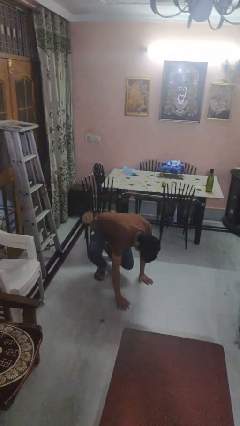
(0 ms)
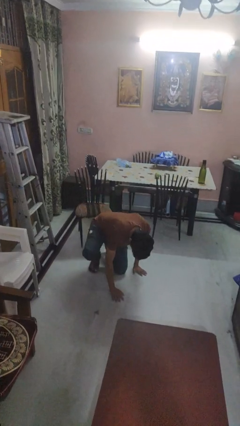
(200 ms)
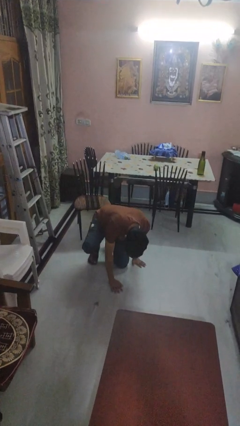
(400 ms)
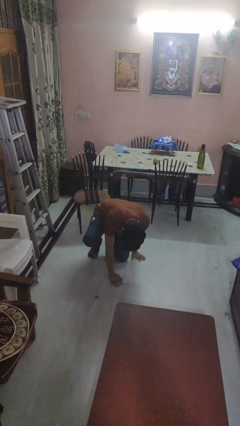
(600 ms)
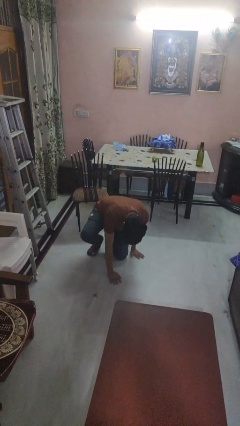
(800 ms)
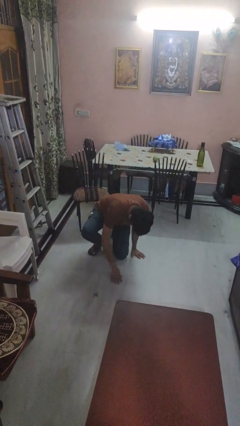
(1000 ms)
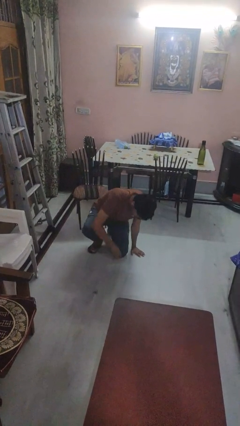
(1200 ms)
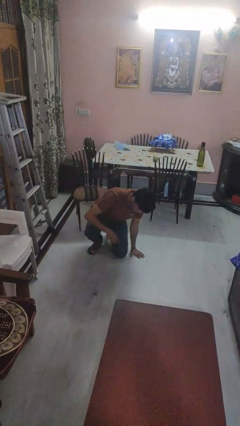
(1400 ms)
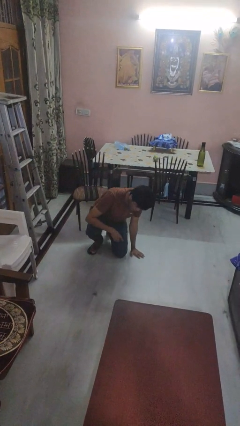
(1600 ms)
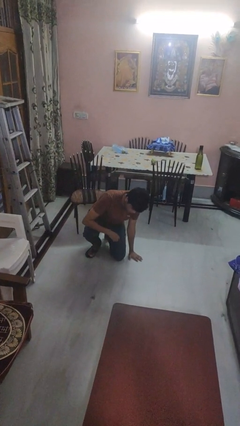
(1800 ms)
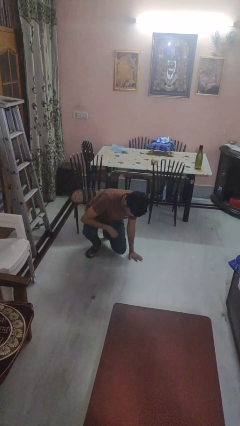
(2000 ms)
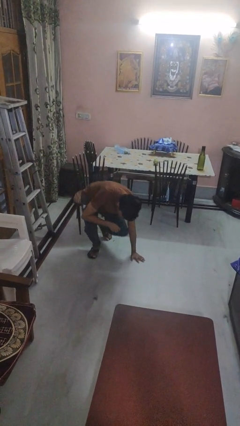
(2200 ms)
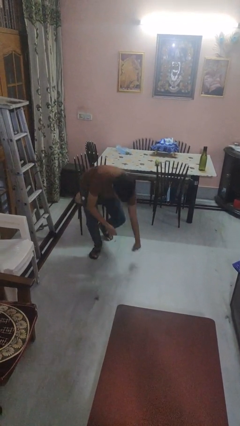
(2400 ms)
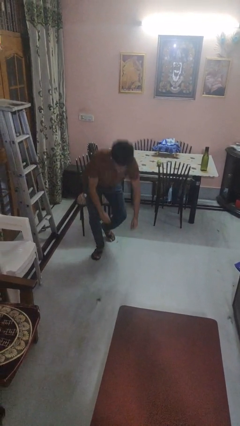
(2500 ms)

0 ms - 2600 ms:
person falls while standing

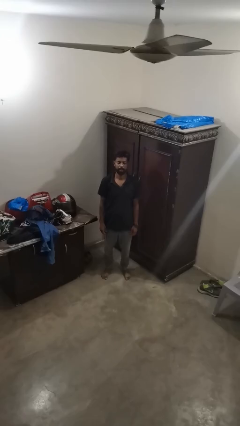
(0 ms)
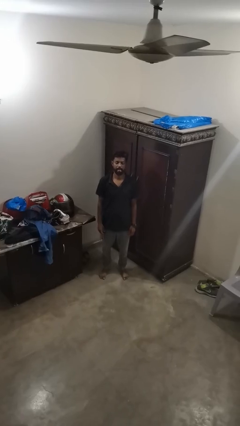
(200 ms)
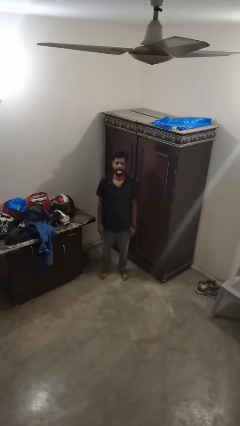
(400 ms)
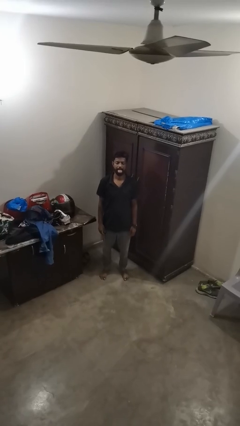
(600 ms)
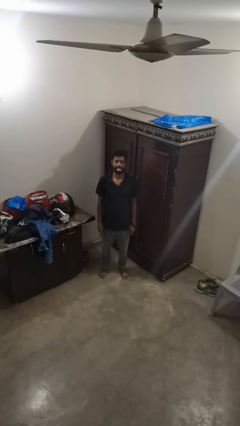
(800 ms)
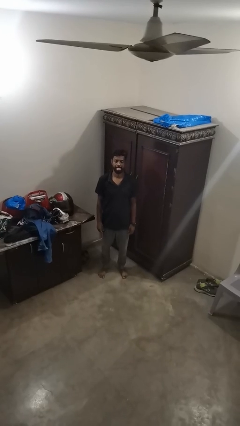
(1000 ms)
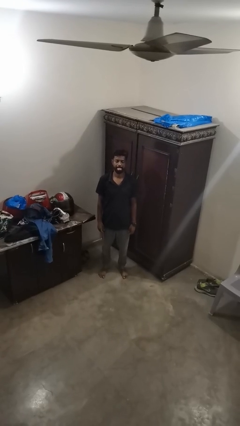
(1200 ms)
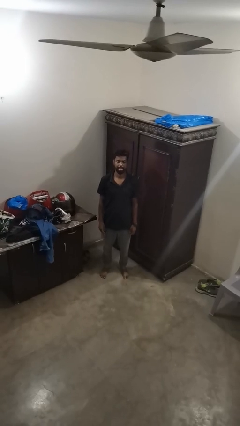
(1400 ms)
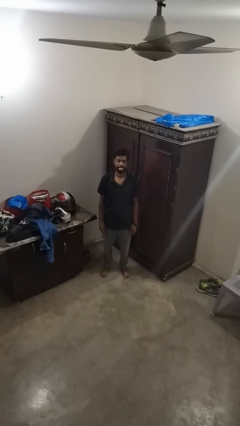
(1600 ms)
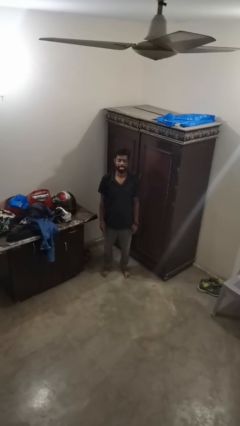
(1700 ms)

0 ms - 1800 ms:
person sticks out tongue

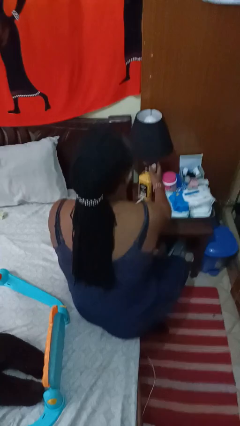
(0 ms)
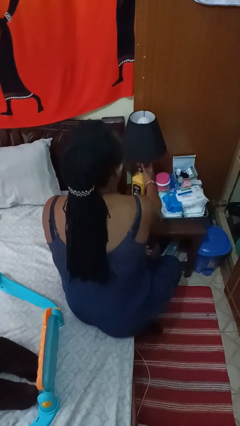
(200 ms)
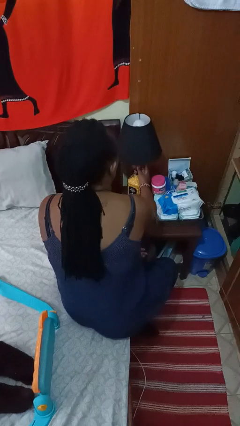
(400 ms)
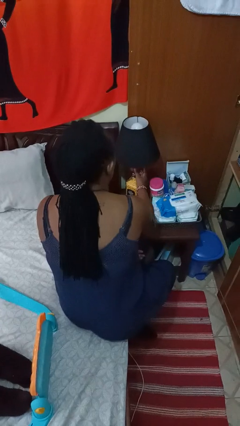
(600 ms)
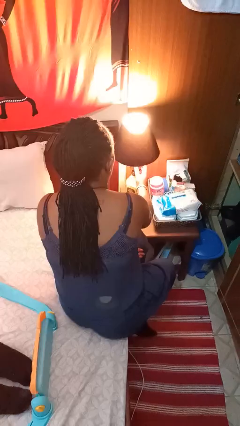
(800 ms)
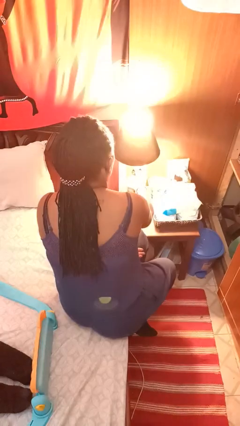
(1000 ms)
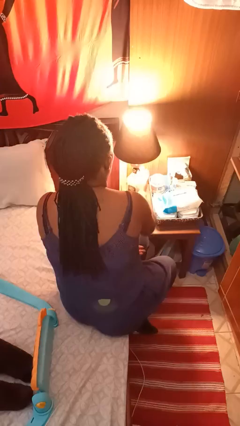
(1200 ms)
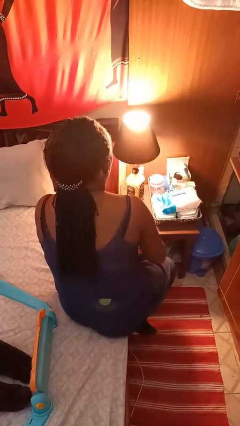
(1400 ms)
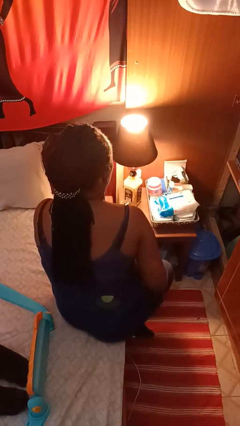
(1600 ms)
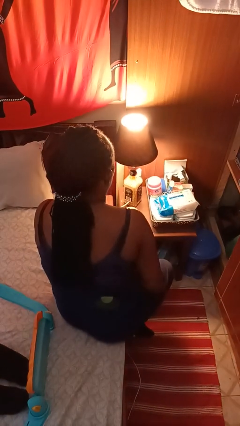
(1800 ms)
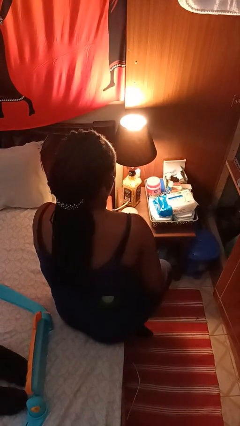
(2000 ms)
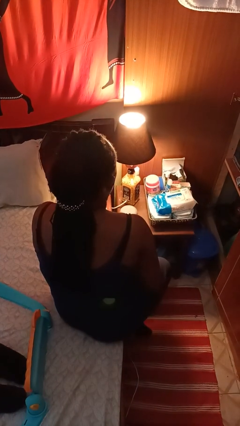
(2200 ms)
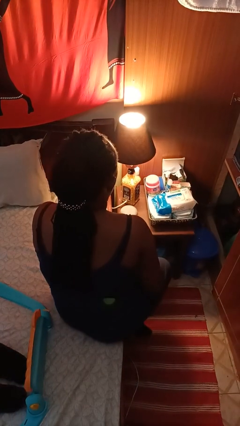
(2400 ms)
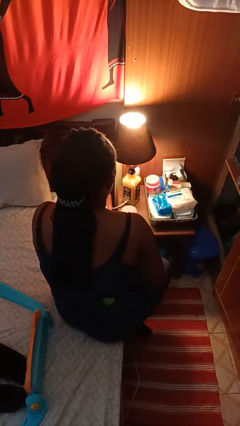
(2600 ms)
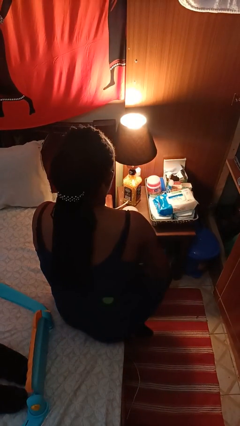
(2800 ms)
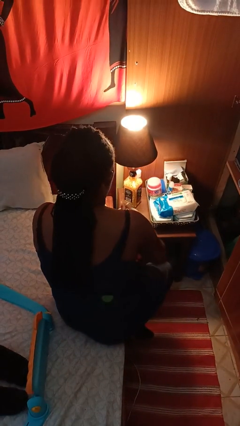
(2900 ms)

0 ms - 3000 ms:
person turns on lamp

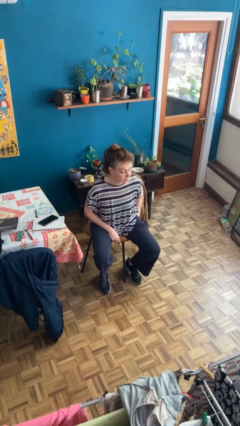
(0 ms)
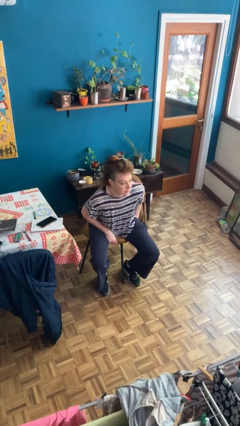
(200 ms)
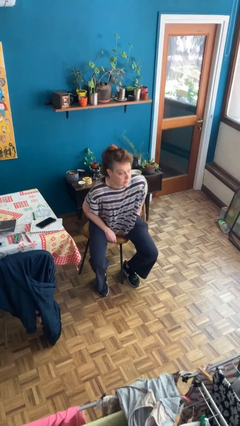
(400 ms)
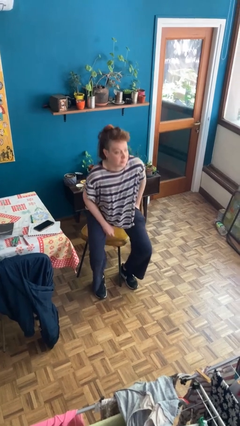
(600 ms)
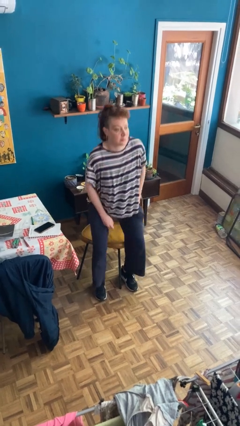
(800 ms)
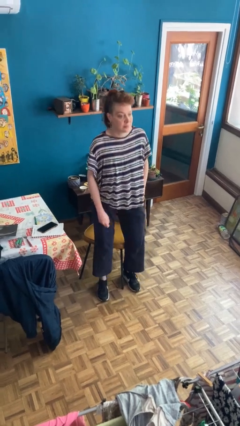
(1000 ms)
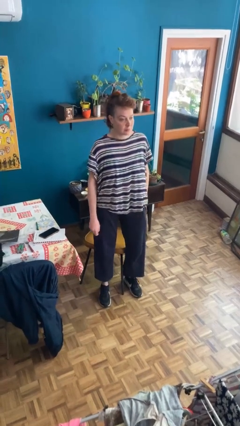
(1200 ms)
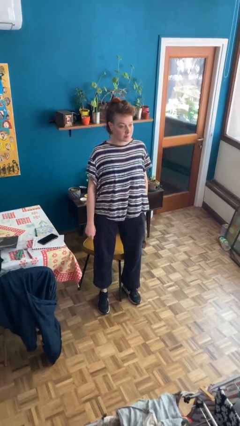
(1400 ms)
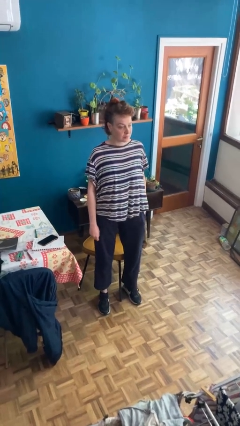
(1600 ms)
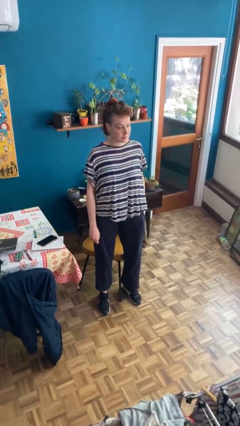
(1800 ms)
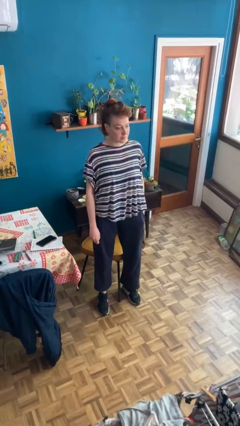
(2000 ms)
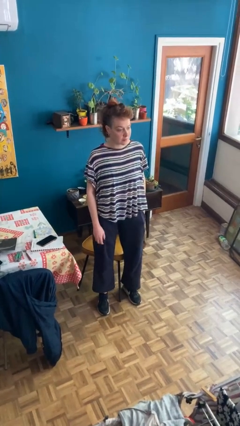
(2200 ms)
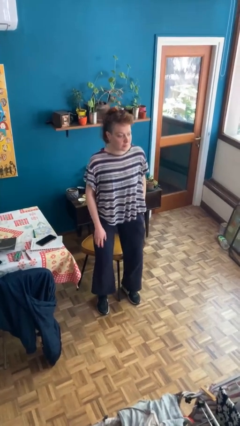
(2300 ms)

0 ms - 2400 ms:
person stands up

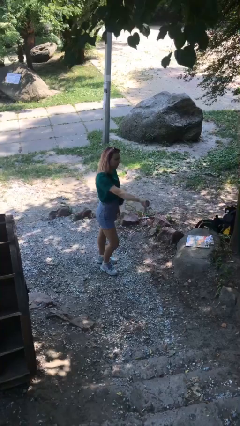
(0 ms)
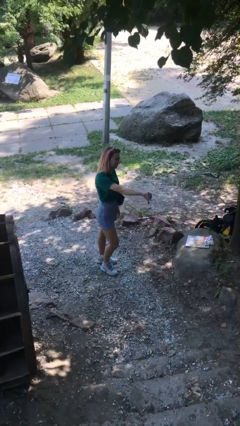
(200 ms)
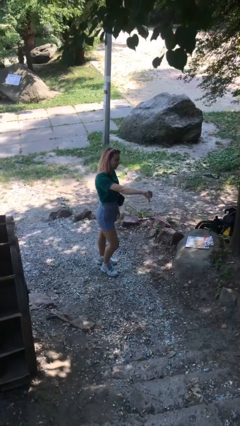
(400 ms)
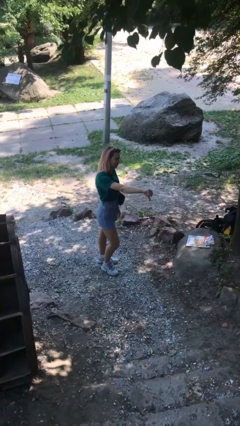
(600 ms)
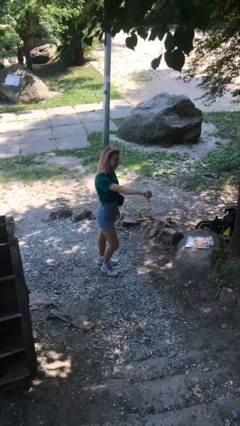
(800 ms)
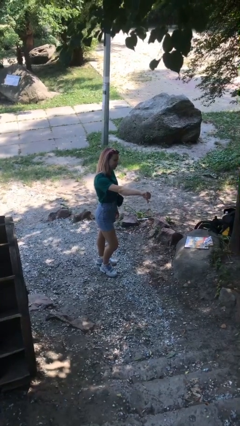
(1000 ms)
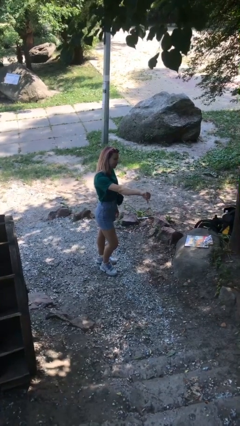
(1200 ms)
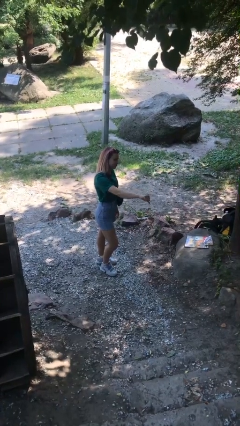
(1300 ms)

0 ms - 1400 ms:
person gestures thumbs down

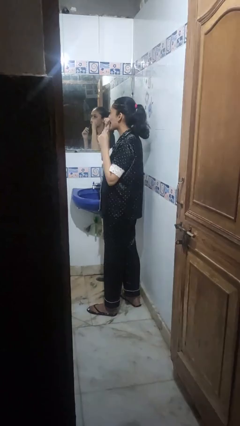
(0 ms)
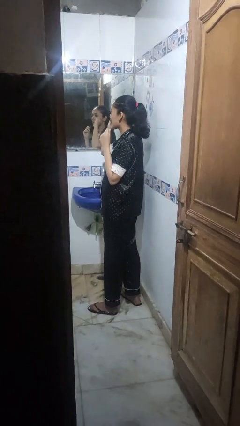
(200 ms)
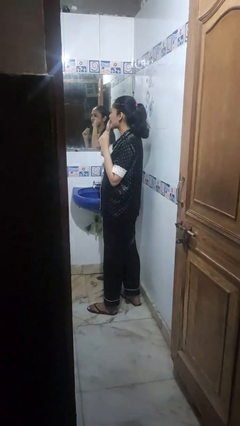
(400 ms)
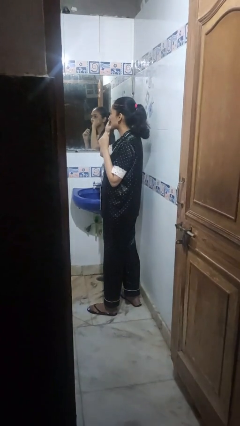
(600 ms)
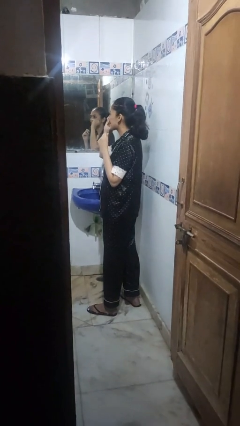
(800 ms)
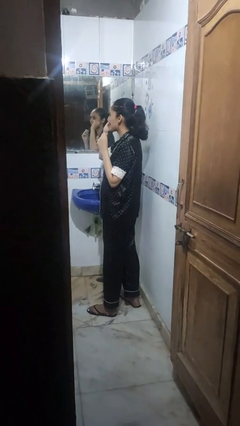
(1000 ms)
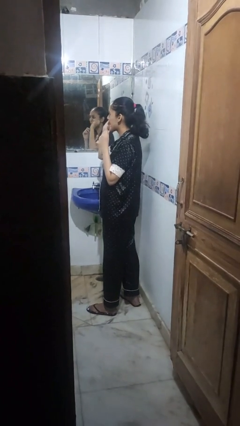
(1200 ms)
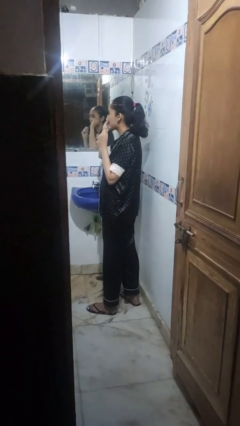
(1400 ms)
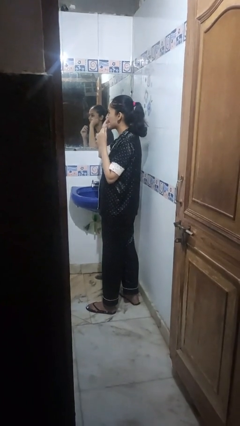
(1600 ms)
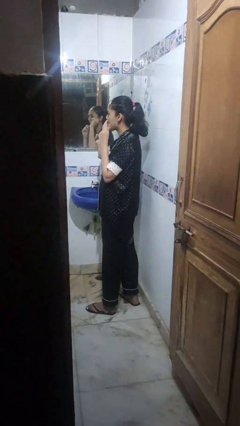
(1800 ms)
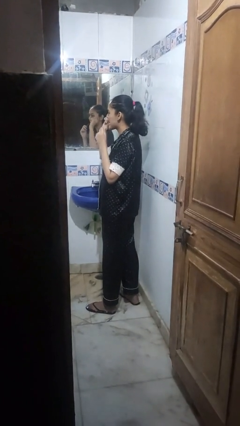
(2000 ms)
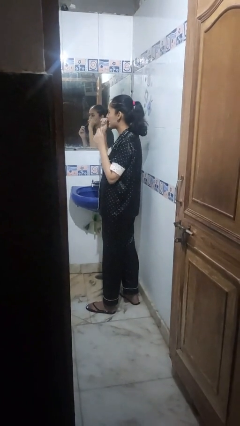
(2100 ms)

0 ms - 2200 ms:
person flosses

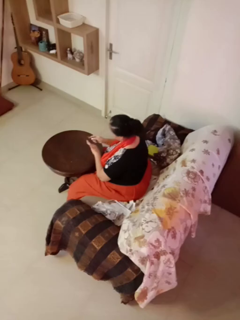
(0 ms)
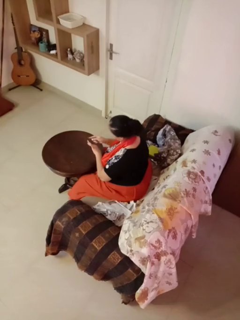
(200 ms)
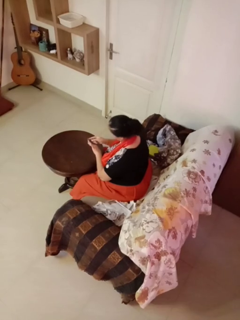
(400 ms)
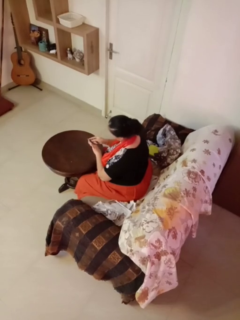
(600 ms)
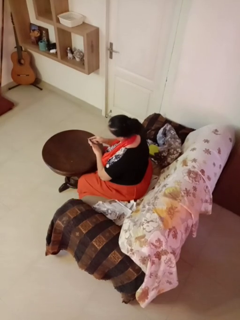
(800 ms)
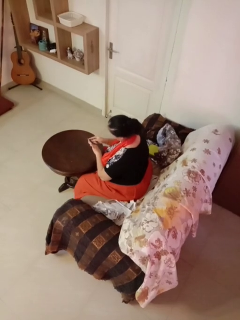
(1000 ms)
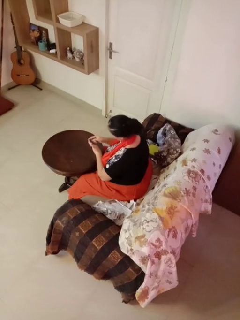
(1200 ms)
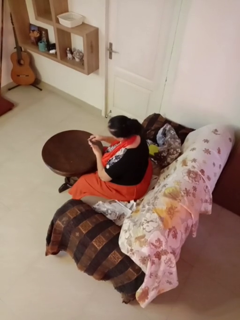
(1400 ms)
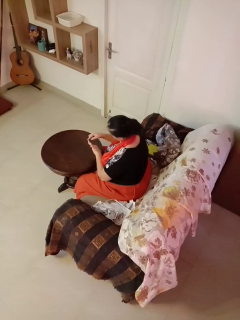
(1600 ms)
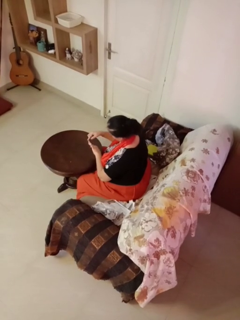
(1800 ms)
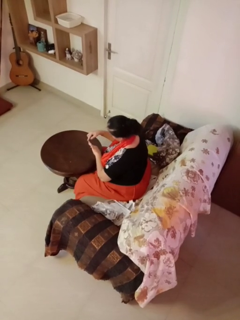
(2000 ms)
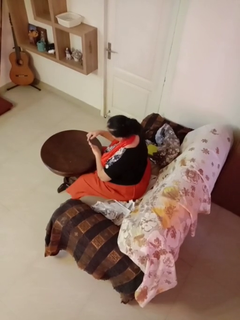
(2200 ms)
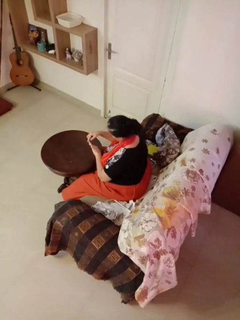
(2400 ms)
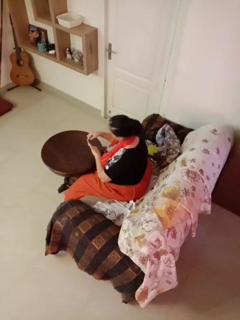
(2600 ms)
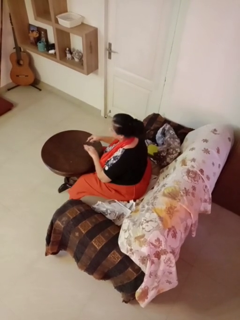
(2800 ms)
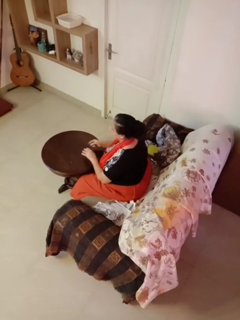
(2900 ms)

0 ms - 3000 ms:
person files fingernails

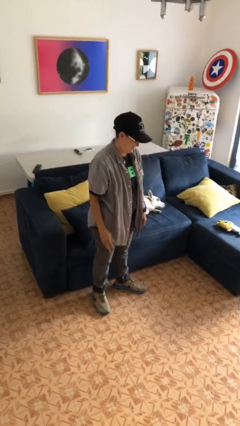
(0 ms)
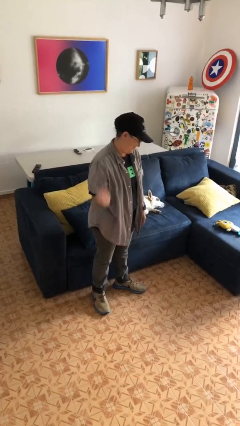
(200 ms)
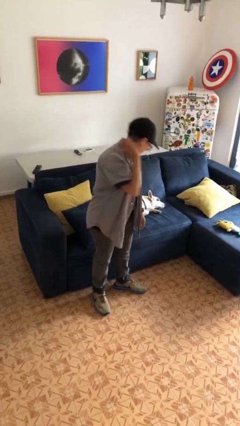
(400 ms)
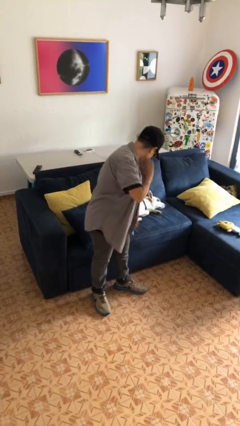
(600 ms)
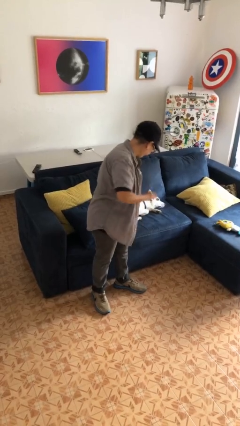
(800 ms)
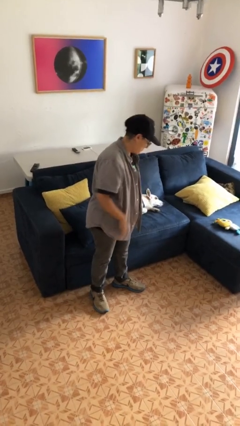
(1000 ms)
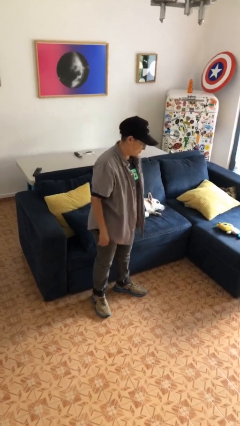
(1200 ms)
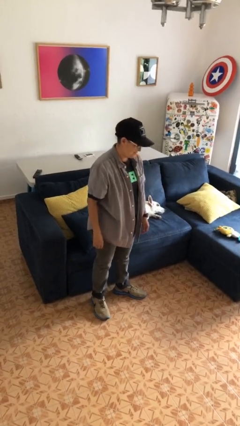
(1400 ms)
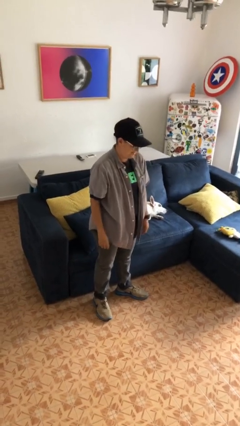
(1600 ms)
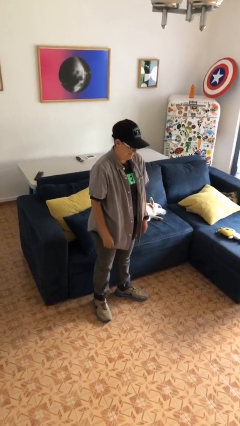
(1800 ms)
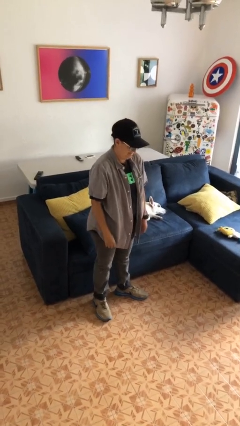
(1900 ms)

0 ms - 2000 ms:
person swats bug
